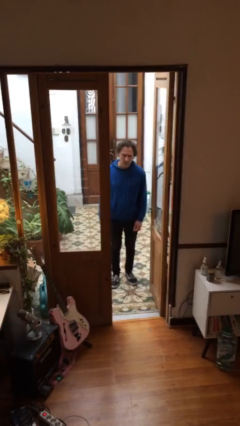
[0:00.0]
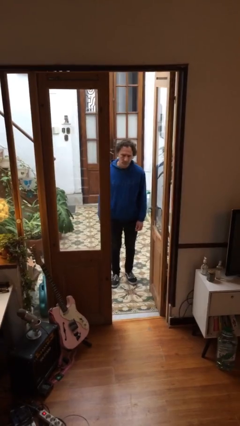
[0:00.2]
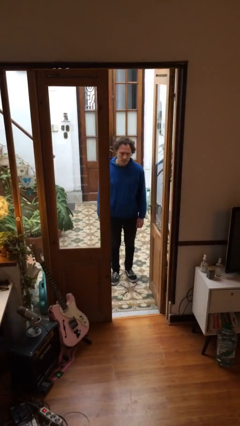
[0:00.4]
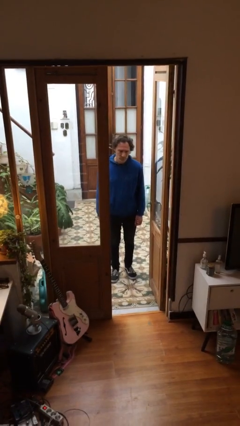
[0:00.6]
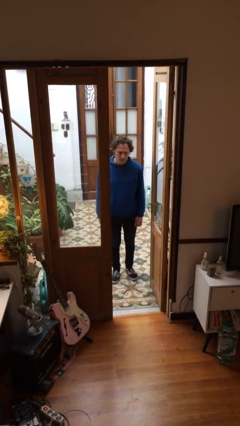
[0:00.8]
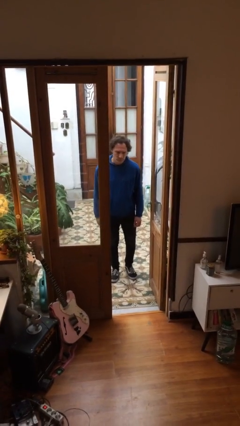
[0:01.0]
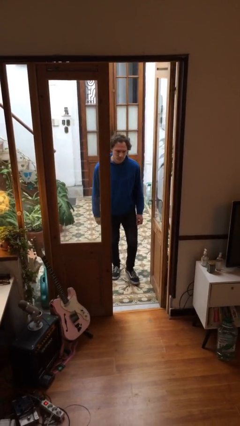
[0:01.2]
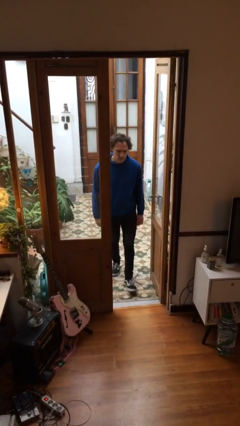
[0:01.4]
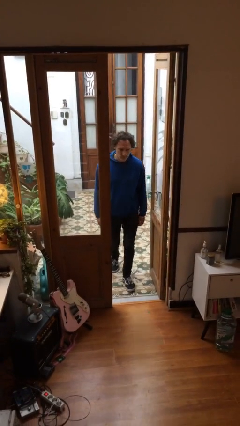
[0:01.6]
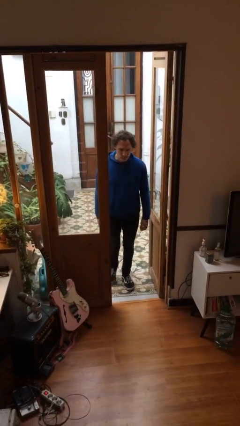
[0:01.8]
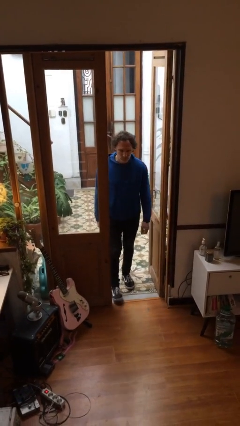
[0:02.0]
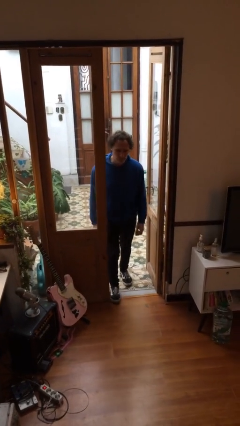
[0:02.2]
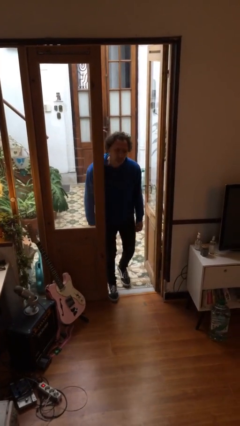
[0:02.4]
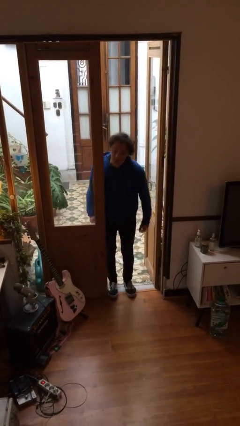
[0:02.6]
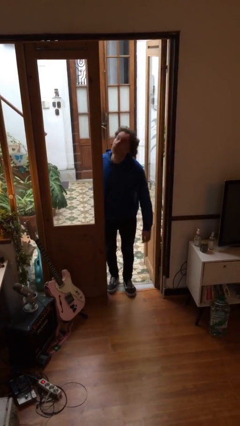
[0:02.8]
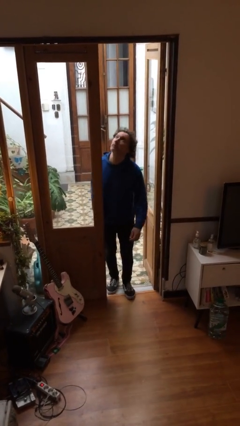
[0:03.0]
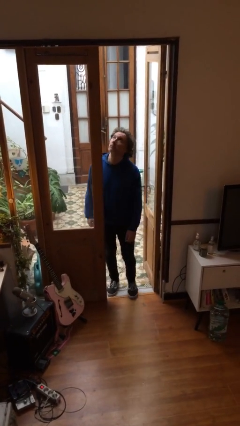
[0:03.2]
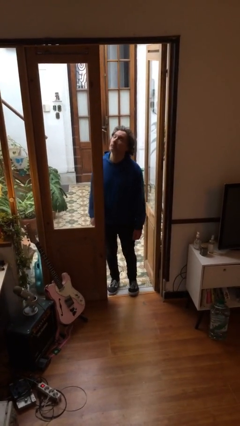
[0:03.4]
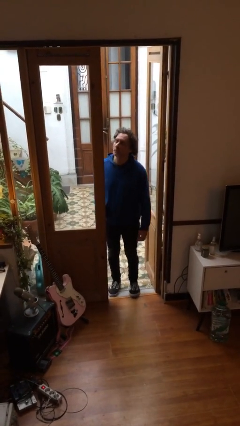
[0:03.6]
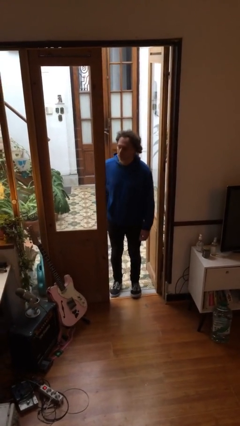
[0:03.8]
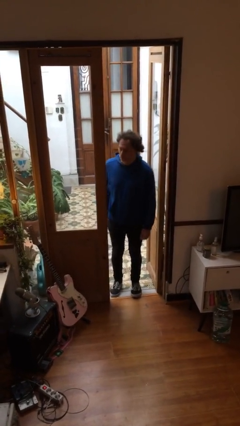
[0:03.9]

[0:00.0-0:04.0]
person bumps into wall

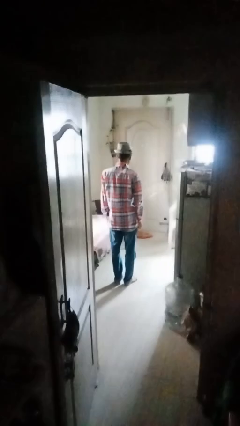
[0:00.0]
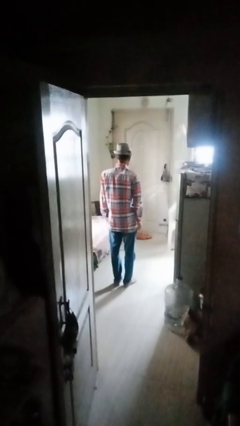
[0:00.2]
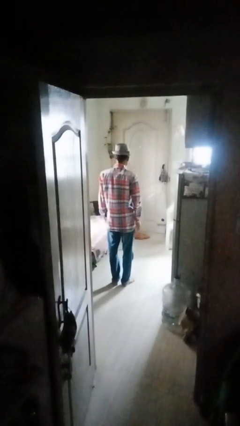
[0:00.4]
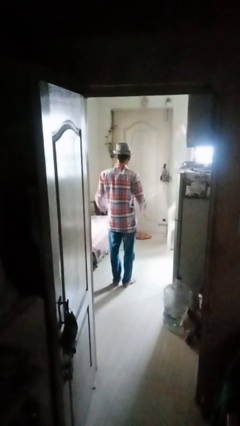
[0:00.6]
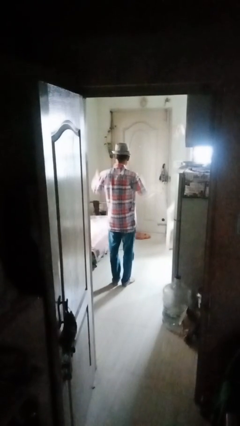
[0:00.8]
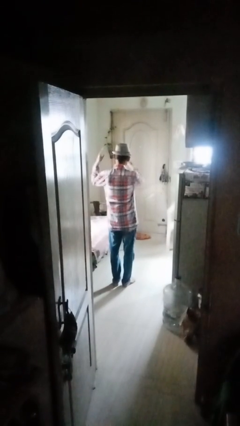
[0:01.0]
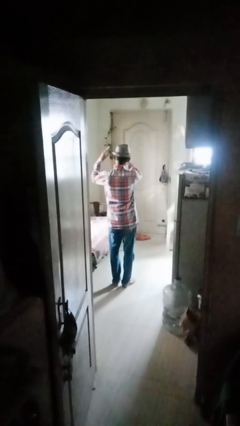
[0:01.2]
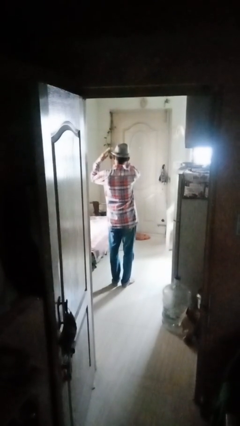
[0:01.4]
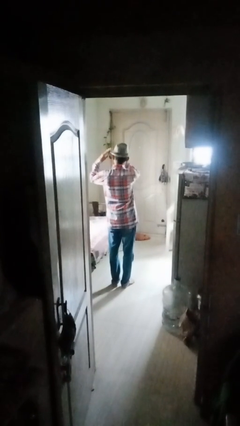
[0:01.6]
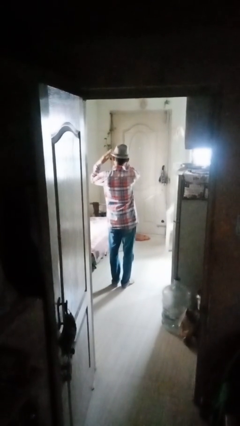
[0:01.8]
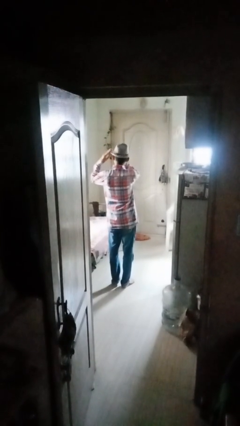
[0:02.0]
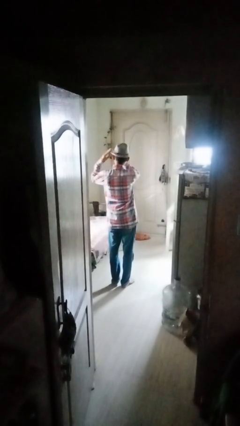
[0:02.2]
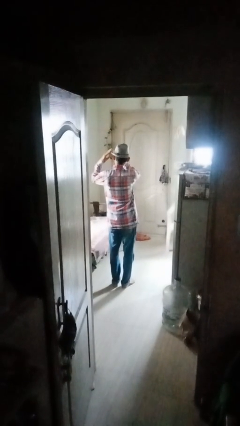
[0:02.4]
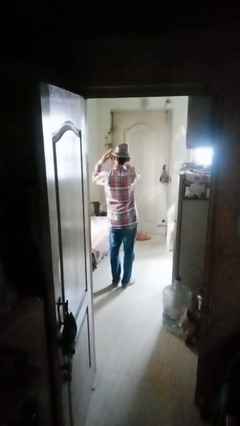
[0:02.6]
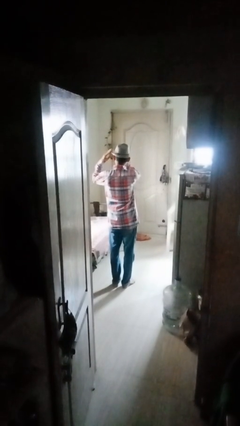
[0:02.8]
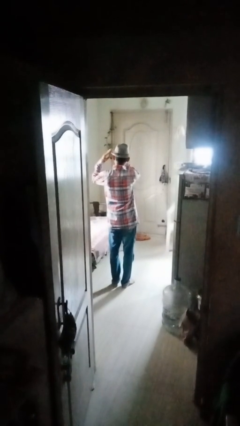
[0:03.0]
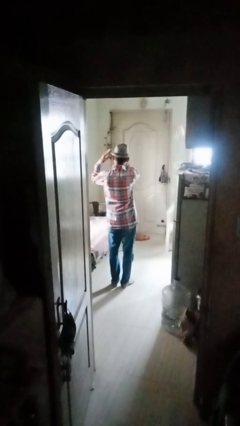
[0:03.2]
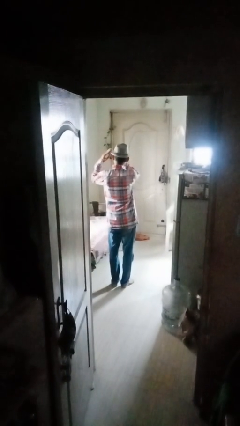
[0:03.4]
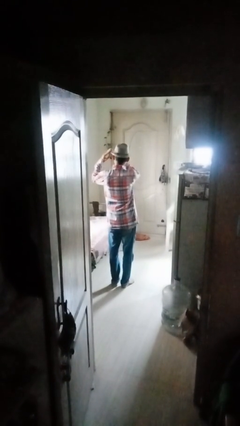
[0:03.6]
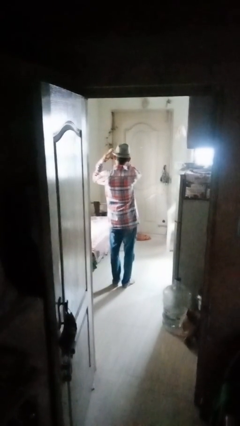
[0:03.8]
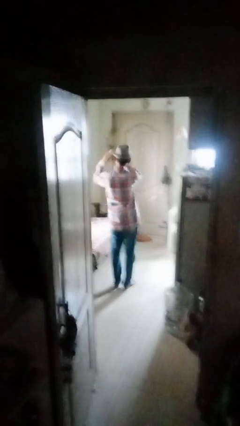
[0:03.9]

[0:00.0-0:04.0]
person gestures heart

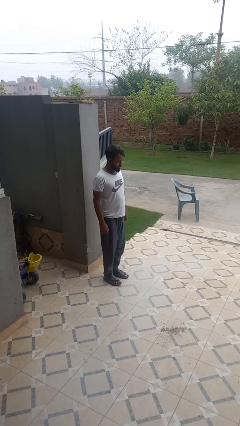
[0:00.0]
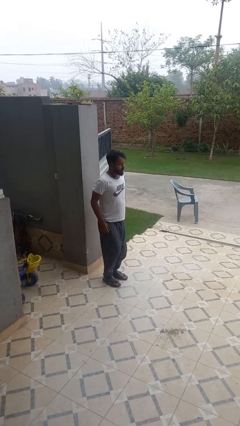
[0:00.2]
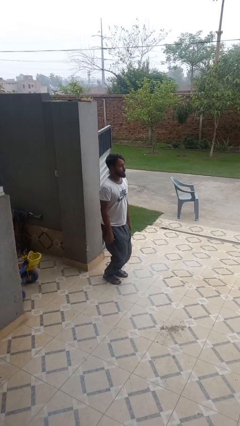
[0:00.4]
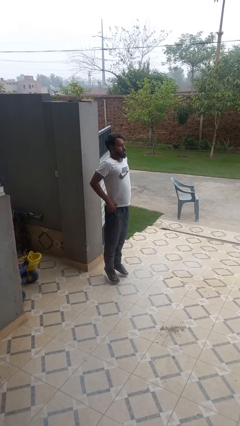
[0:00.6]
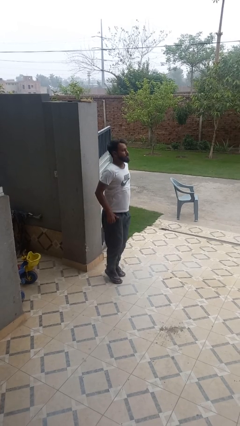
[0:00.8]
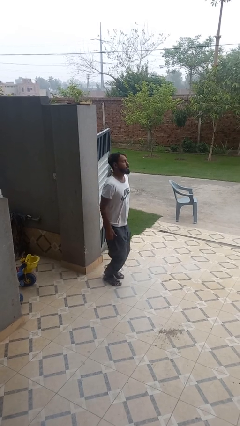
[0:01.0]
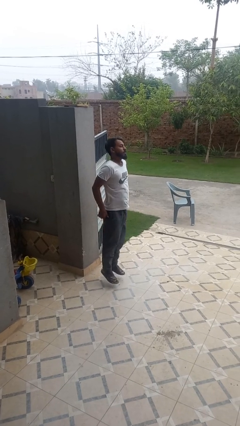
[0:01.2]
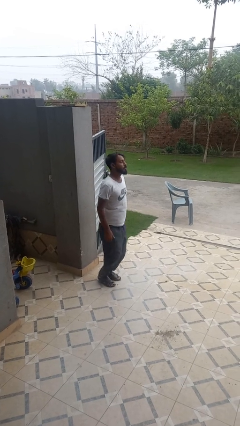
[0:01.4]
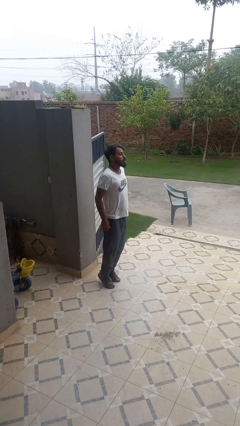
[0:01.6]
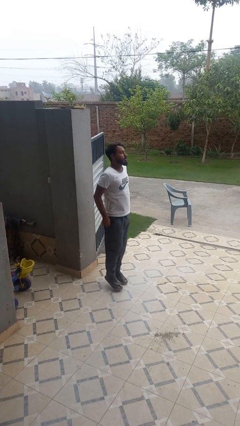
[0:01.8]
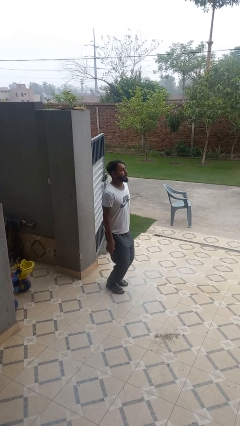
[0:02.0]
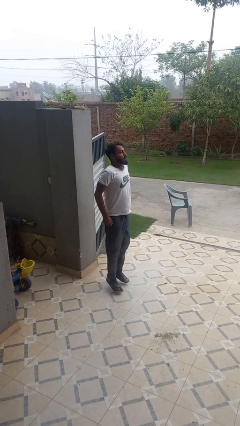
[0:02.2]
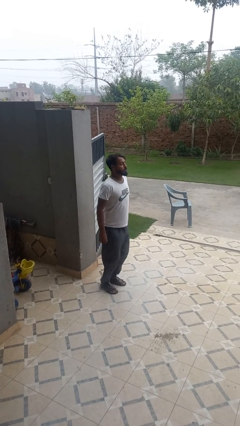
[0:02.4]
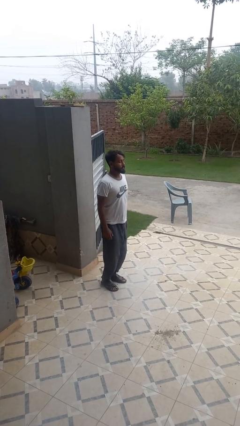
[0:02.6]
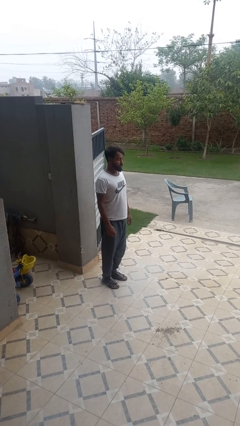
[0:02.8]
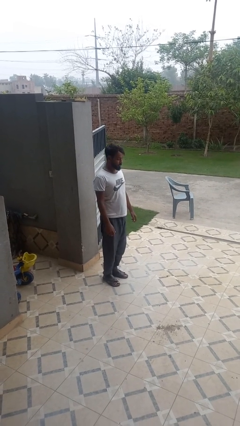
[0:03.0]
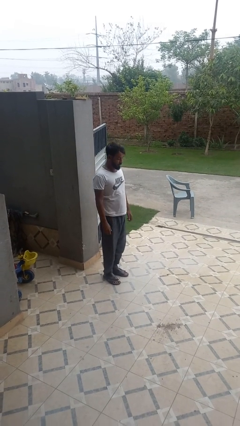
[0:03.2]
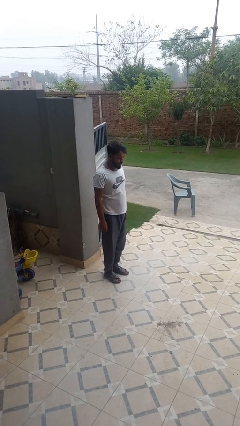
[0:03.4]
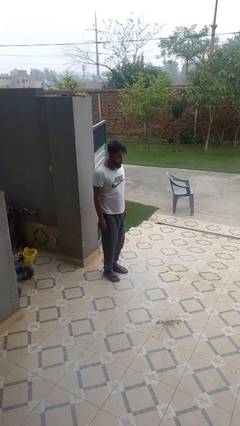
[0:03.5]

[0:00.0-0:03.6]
person jumps

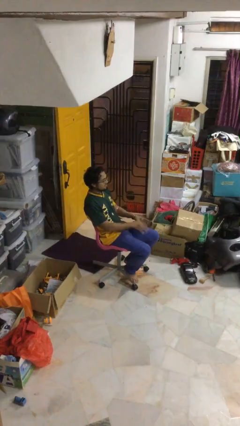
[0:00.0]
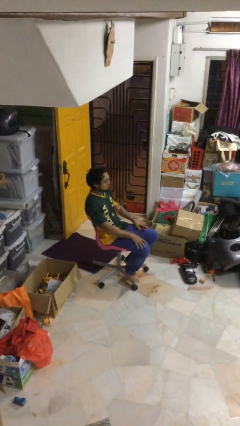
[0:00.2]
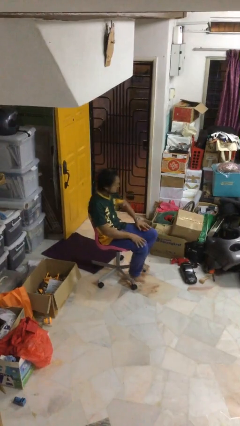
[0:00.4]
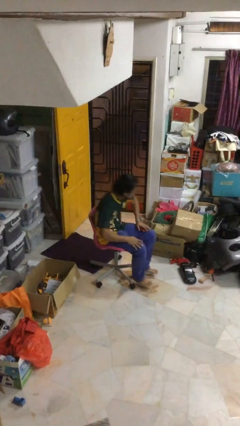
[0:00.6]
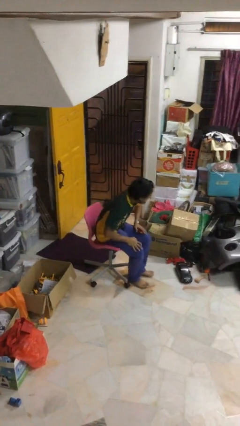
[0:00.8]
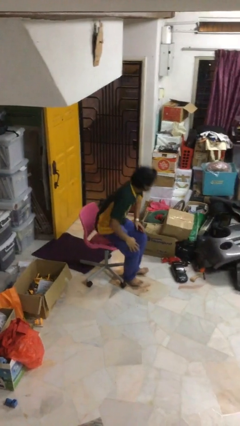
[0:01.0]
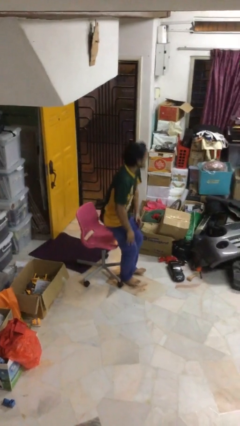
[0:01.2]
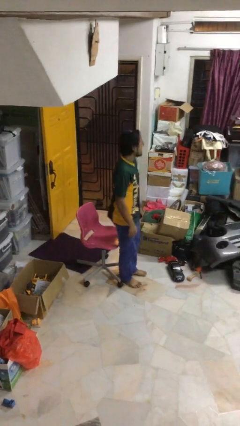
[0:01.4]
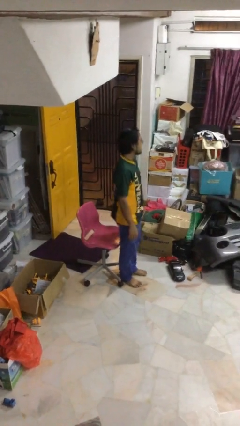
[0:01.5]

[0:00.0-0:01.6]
person stands up

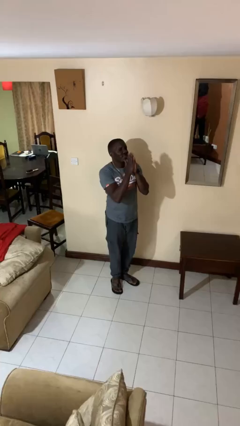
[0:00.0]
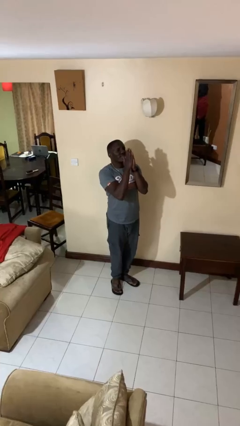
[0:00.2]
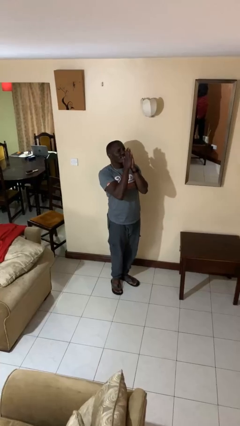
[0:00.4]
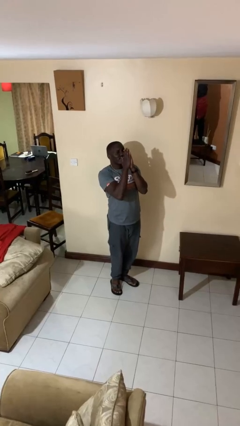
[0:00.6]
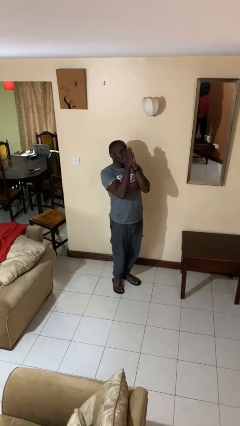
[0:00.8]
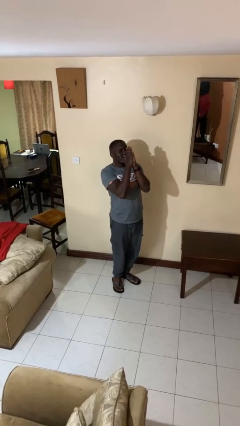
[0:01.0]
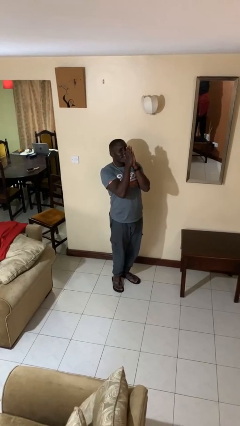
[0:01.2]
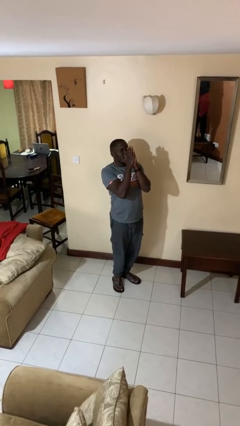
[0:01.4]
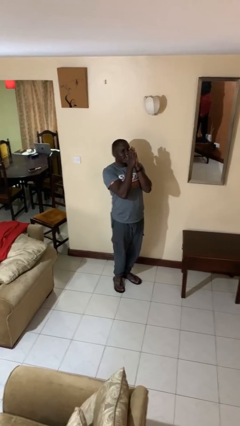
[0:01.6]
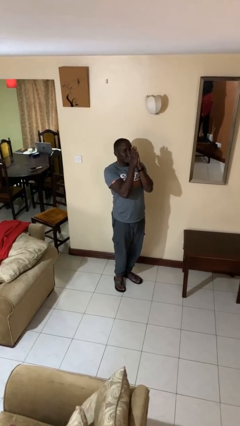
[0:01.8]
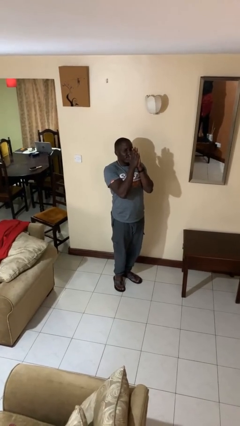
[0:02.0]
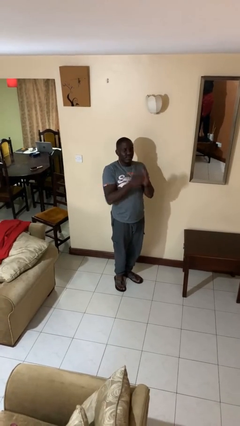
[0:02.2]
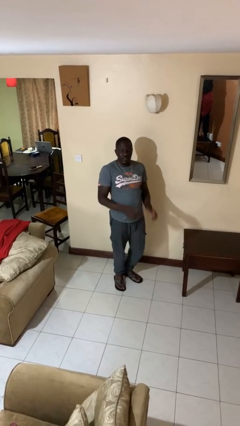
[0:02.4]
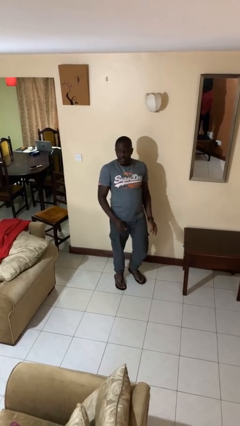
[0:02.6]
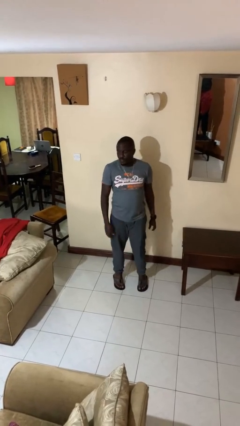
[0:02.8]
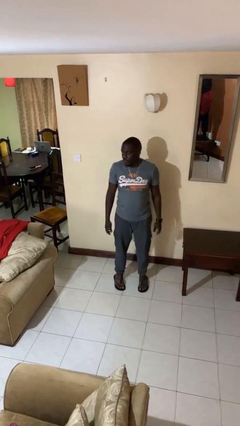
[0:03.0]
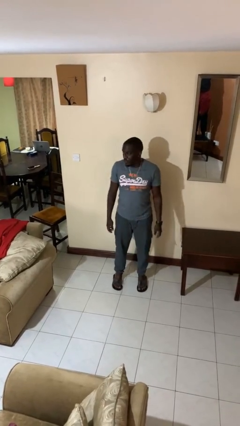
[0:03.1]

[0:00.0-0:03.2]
person prays

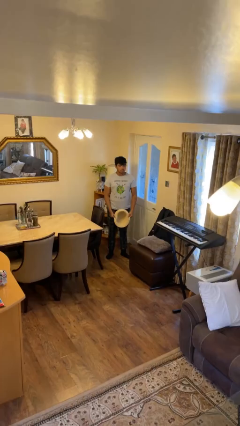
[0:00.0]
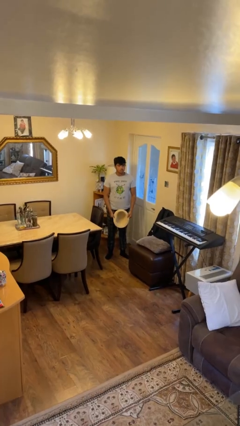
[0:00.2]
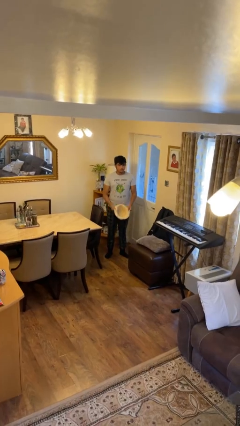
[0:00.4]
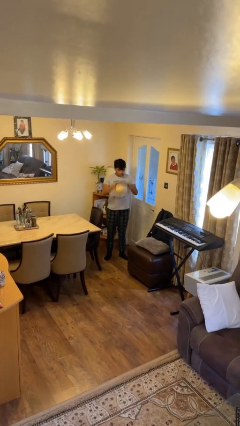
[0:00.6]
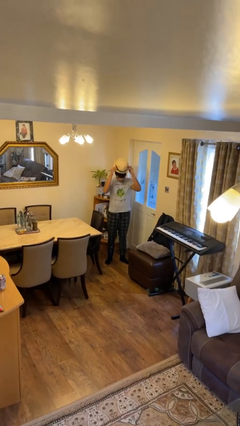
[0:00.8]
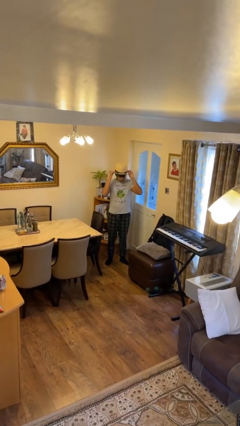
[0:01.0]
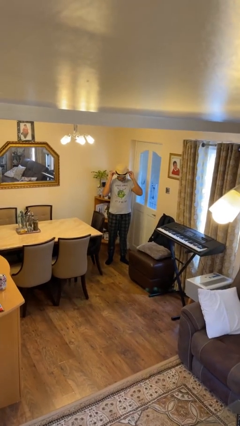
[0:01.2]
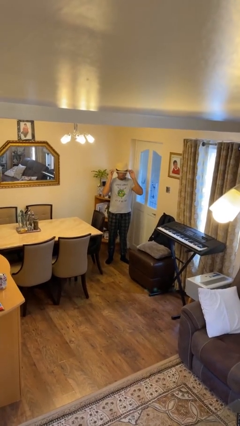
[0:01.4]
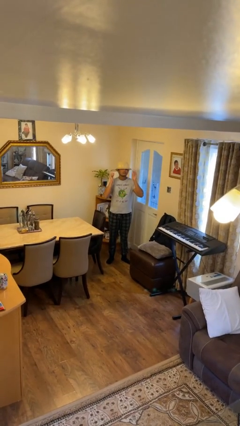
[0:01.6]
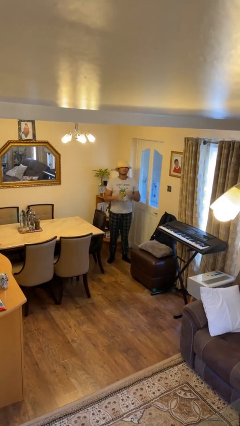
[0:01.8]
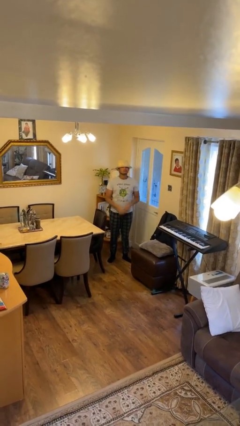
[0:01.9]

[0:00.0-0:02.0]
person puts on hat
